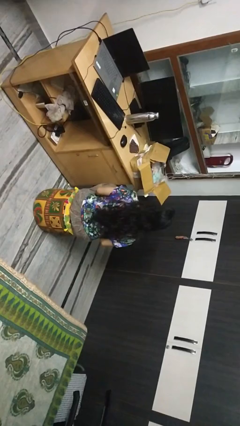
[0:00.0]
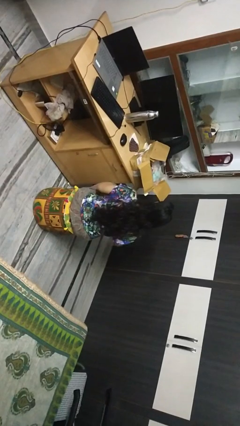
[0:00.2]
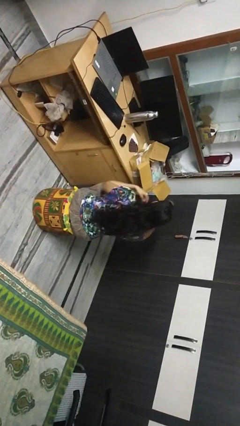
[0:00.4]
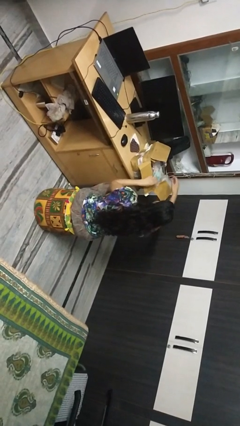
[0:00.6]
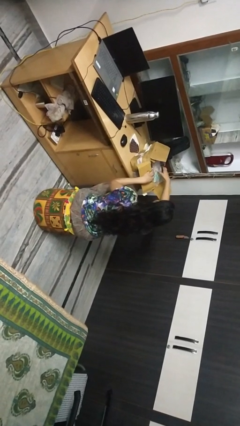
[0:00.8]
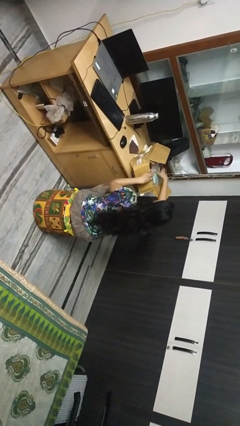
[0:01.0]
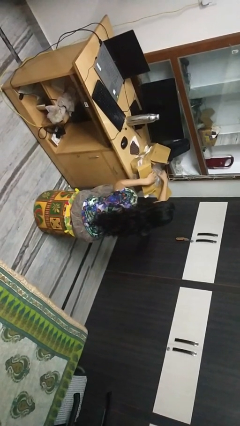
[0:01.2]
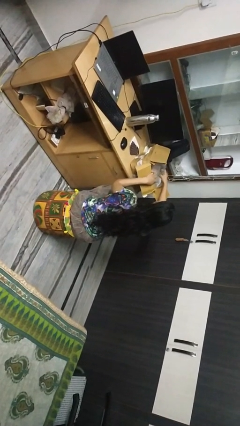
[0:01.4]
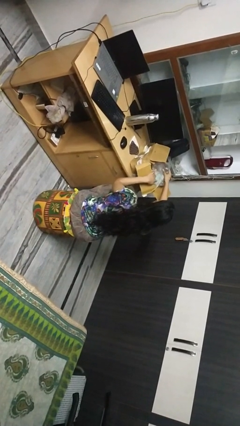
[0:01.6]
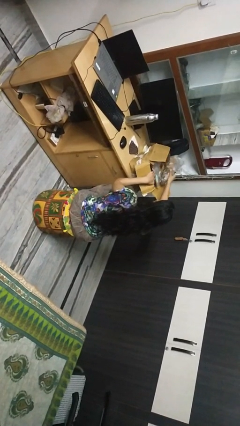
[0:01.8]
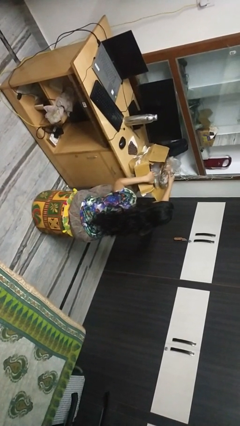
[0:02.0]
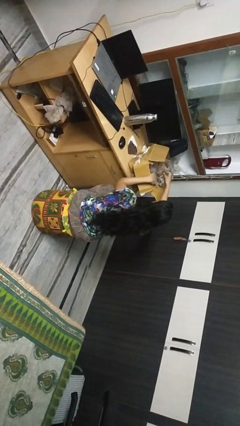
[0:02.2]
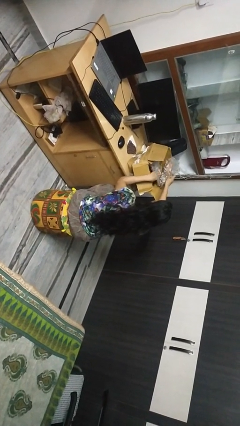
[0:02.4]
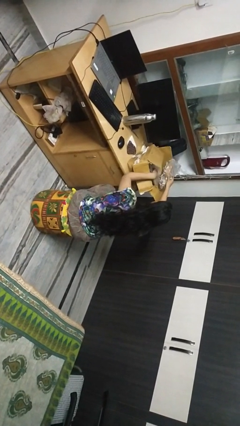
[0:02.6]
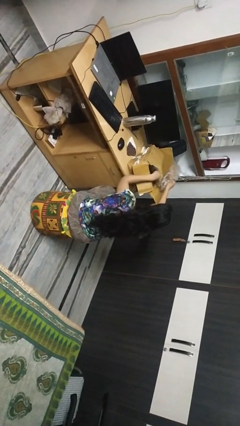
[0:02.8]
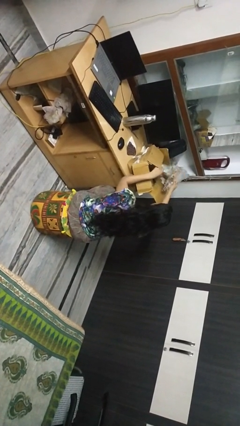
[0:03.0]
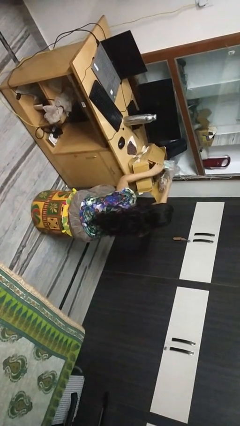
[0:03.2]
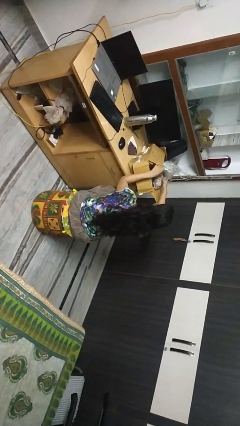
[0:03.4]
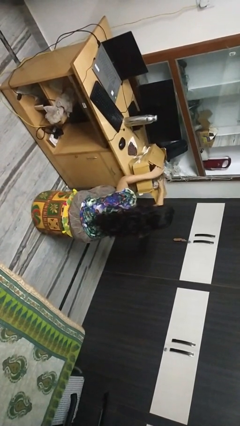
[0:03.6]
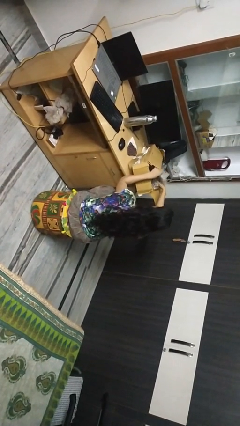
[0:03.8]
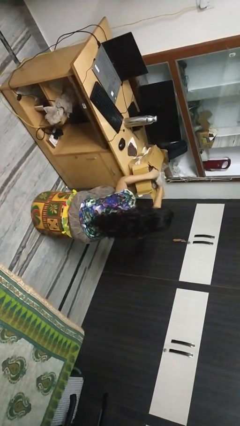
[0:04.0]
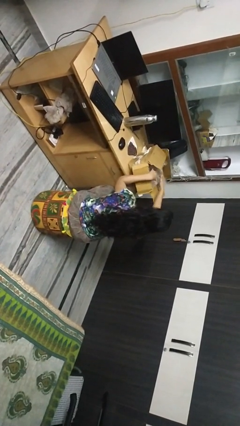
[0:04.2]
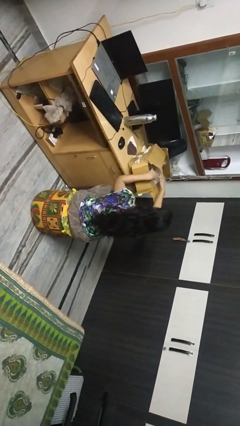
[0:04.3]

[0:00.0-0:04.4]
person searches in box

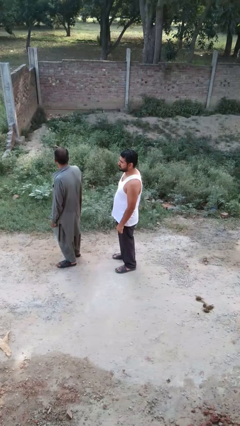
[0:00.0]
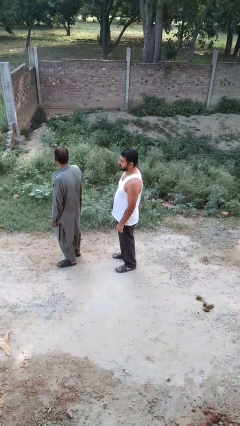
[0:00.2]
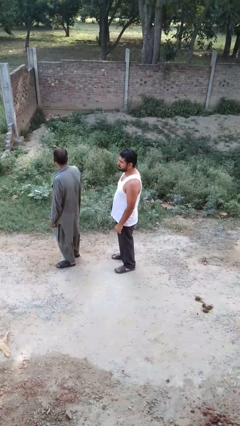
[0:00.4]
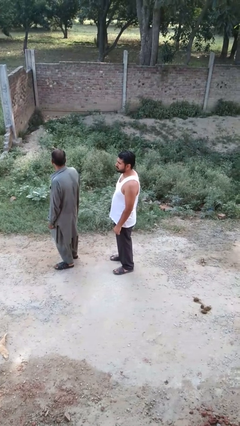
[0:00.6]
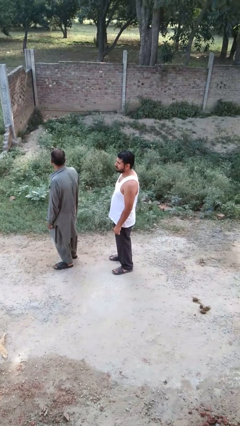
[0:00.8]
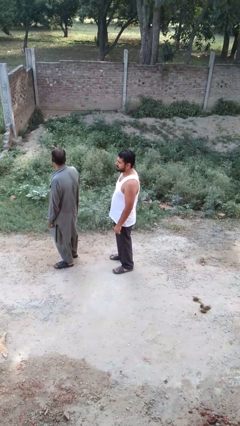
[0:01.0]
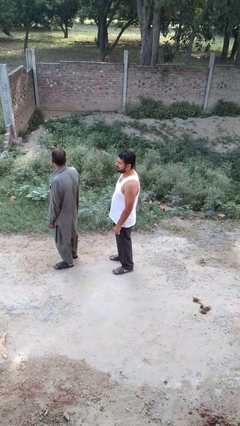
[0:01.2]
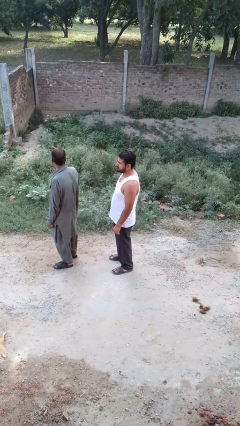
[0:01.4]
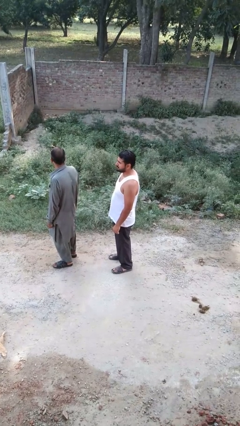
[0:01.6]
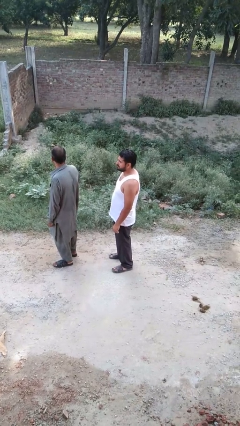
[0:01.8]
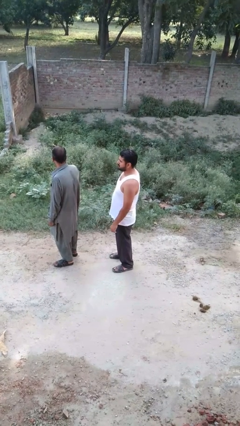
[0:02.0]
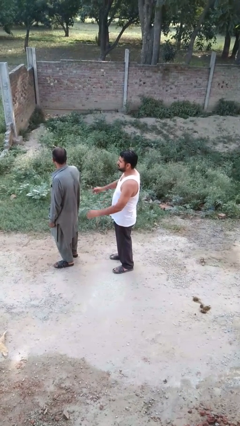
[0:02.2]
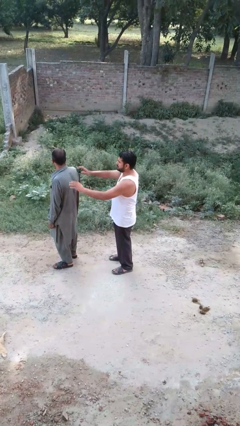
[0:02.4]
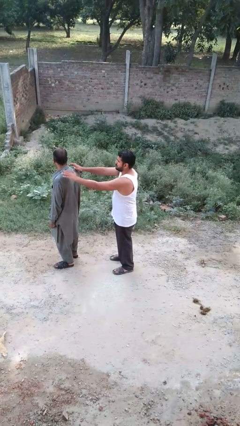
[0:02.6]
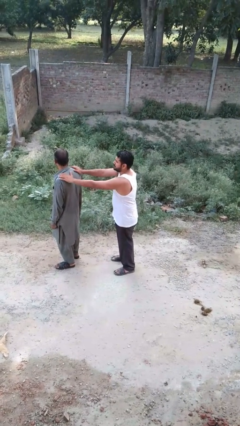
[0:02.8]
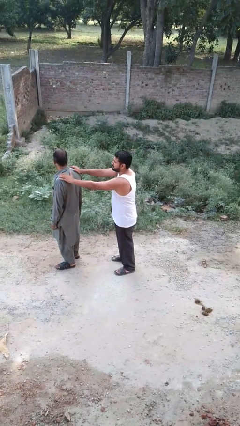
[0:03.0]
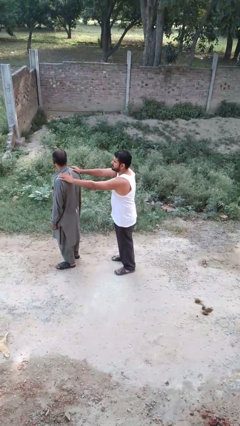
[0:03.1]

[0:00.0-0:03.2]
person grabs person by shoulder

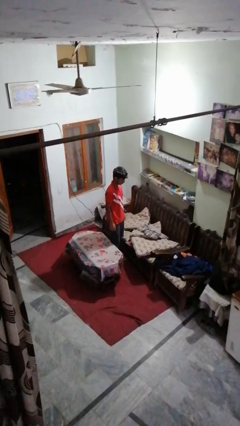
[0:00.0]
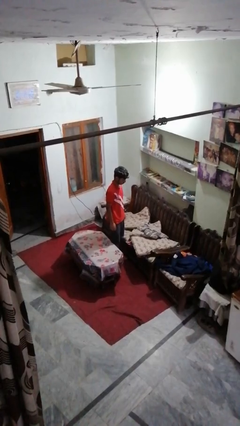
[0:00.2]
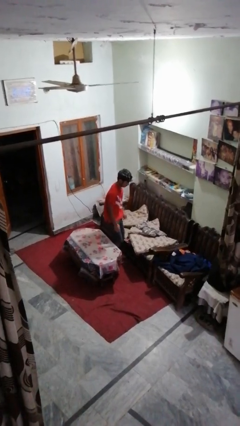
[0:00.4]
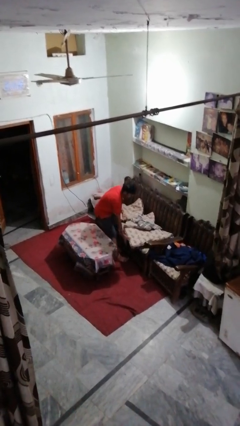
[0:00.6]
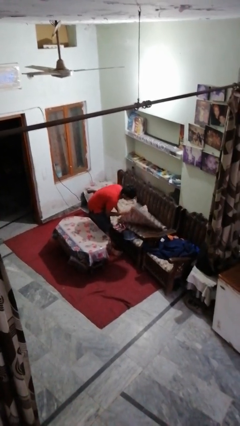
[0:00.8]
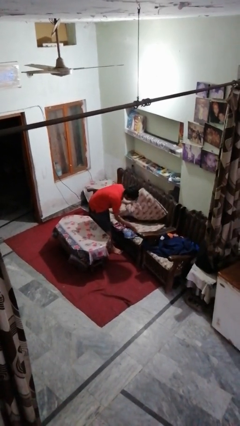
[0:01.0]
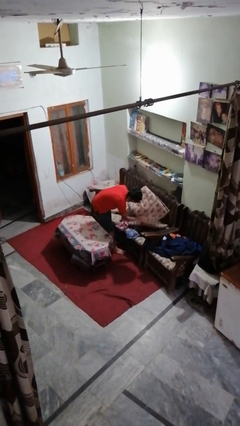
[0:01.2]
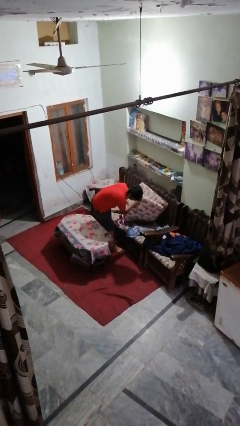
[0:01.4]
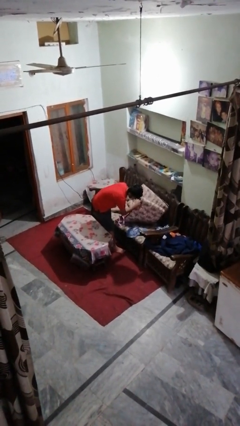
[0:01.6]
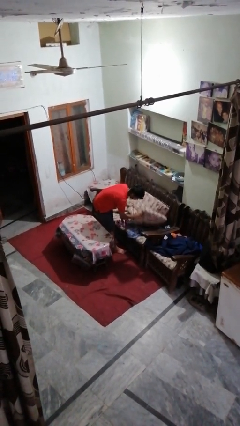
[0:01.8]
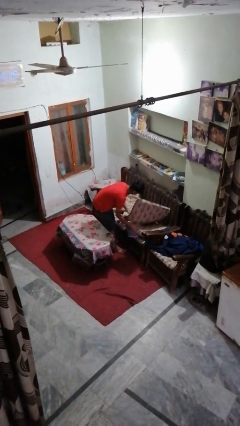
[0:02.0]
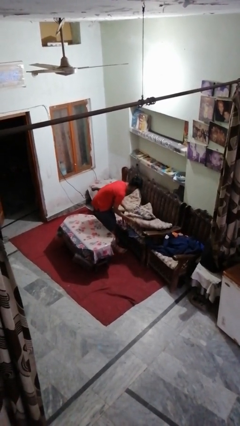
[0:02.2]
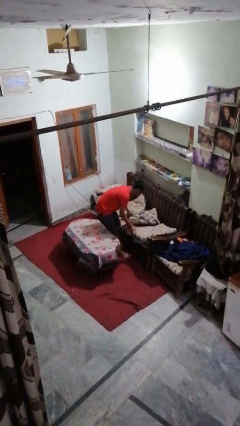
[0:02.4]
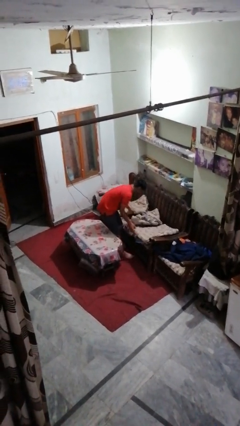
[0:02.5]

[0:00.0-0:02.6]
person searches in couch

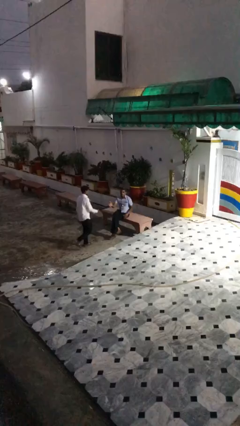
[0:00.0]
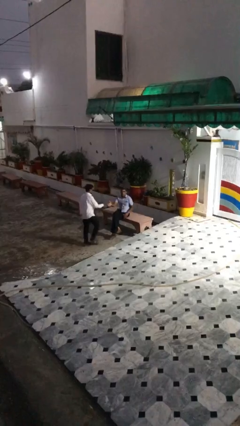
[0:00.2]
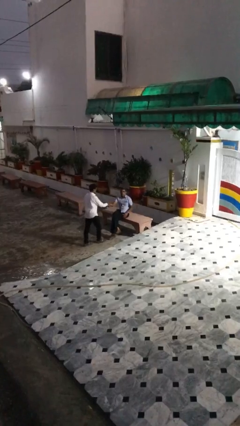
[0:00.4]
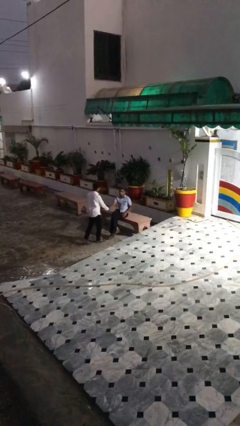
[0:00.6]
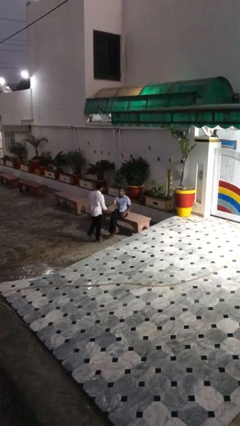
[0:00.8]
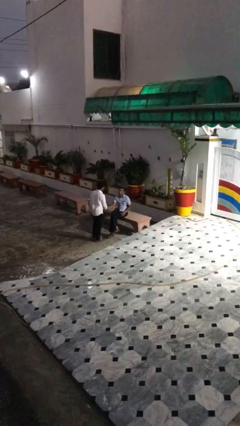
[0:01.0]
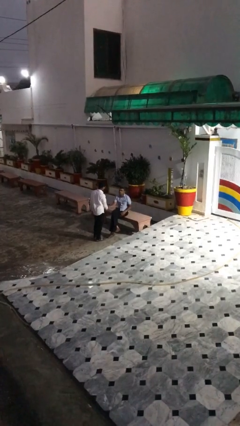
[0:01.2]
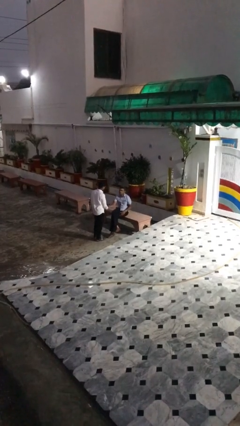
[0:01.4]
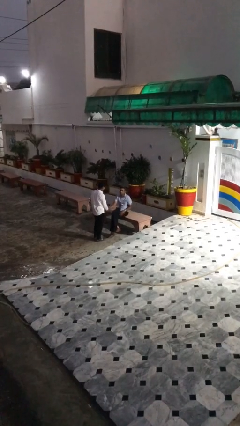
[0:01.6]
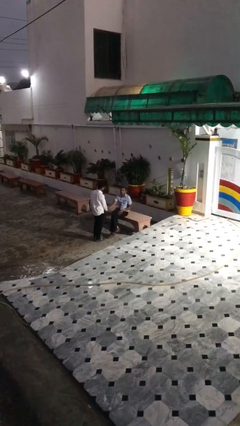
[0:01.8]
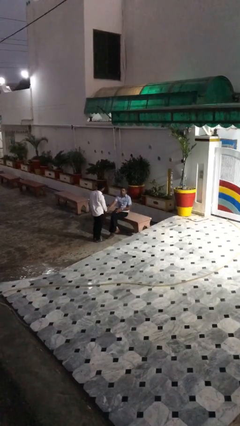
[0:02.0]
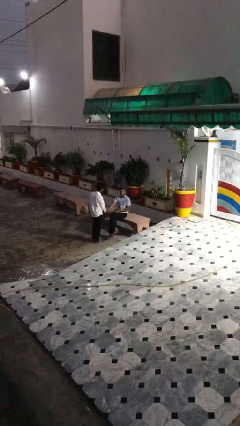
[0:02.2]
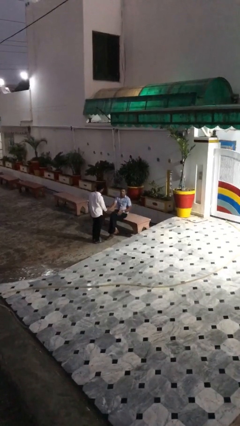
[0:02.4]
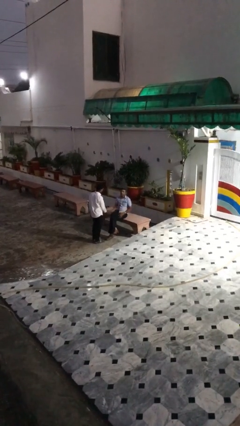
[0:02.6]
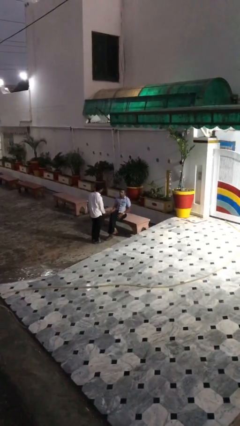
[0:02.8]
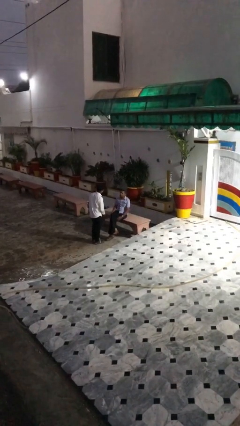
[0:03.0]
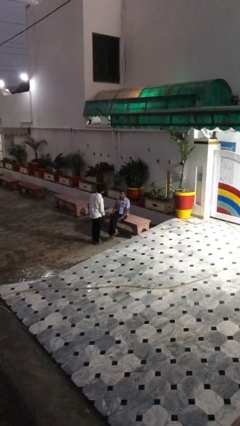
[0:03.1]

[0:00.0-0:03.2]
person shakes hand

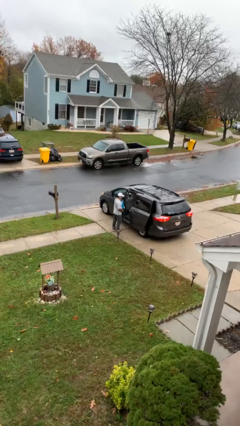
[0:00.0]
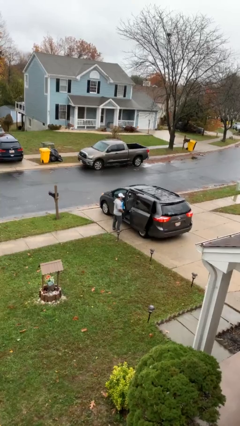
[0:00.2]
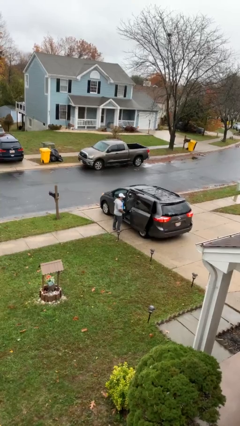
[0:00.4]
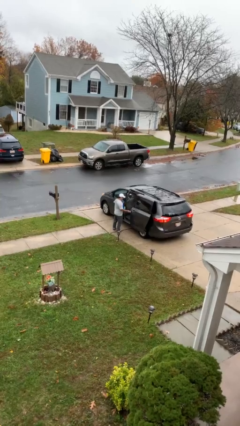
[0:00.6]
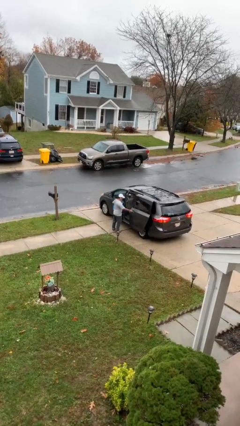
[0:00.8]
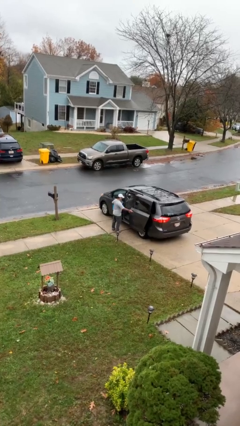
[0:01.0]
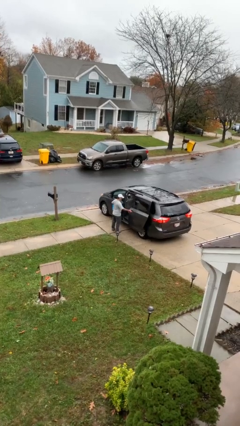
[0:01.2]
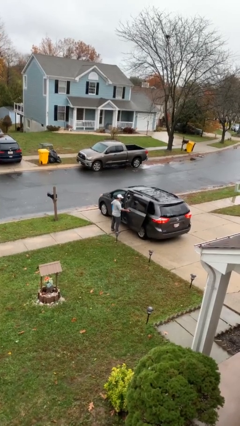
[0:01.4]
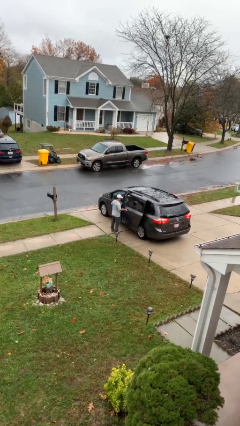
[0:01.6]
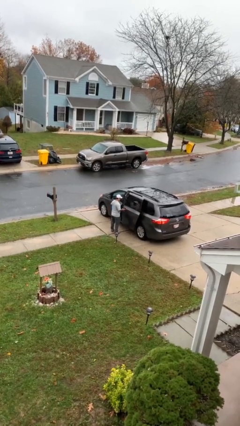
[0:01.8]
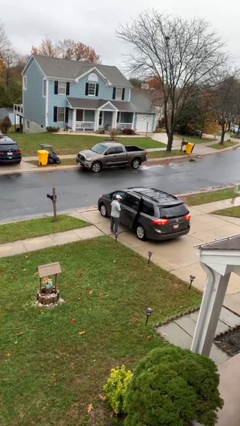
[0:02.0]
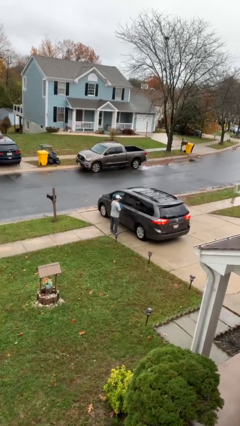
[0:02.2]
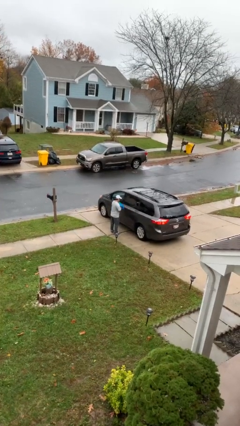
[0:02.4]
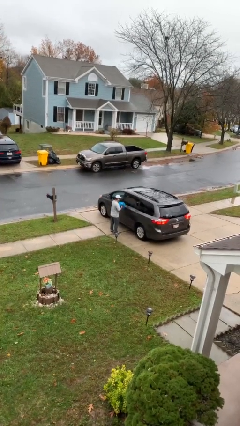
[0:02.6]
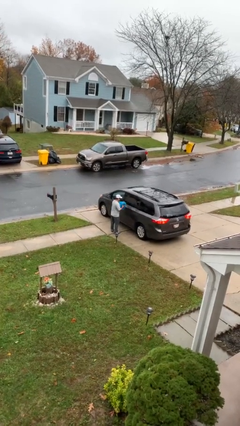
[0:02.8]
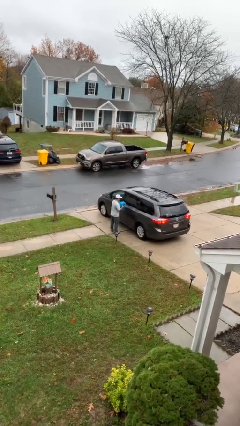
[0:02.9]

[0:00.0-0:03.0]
person closes car door

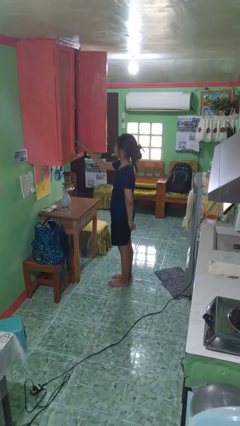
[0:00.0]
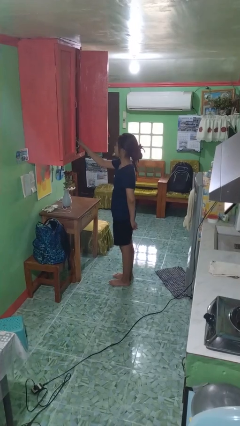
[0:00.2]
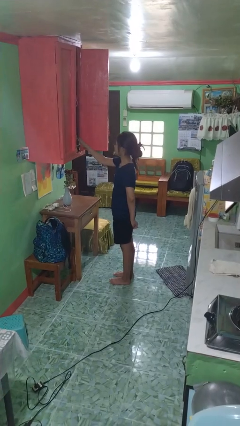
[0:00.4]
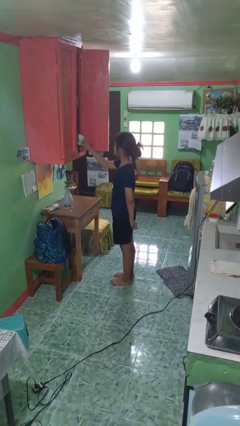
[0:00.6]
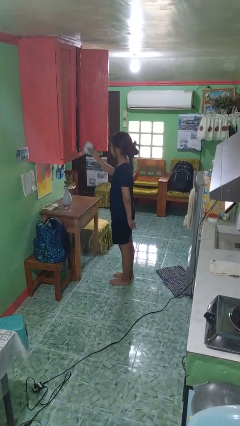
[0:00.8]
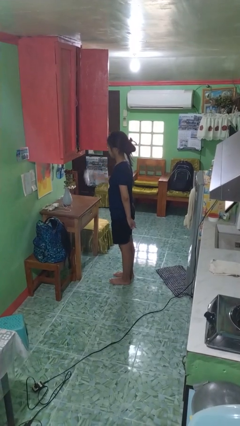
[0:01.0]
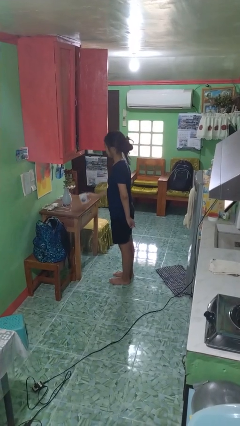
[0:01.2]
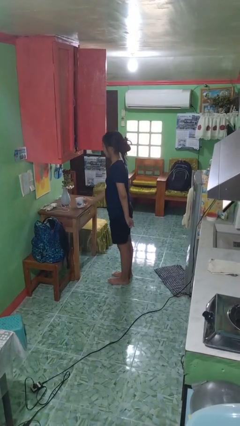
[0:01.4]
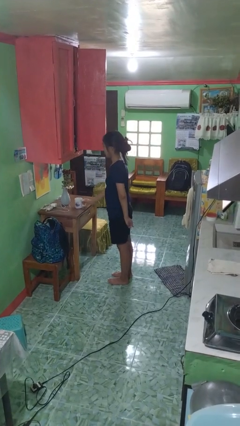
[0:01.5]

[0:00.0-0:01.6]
person takes object from cabinet
